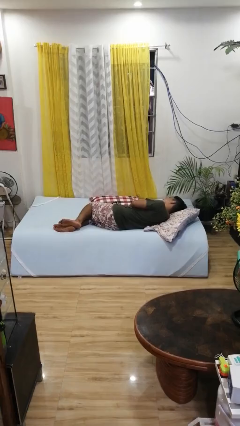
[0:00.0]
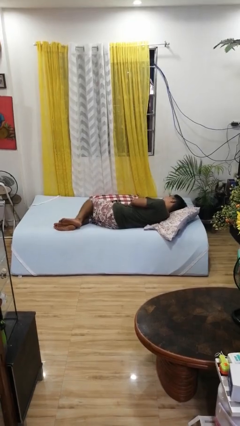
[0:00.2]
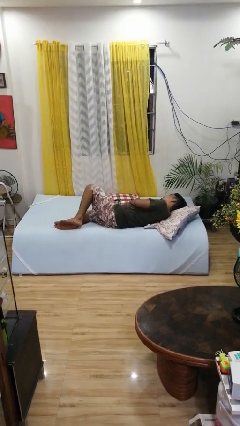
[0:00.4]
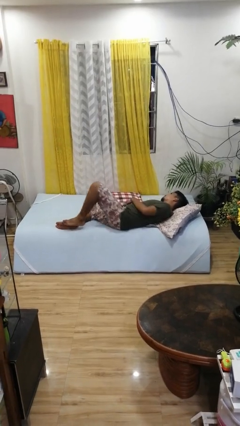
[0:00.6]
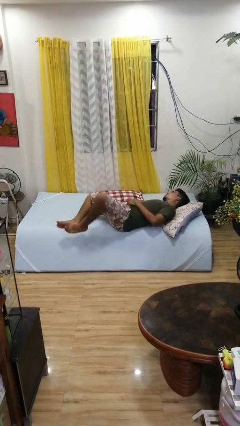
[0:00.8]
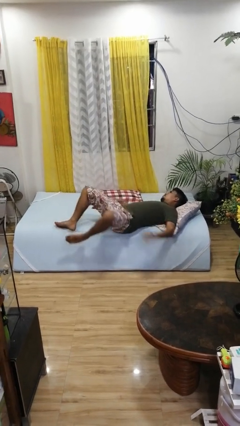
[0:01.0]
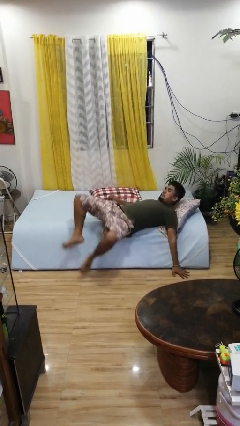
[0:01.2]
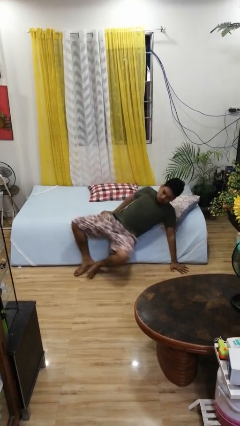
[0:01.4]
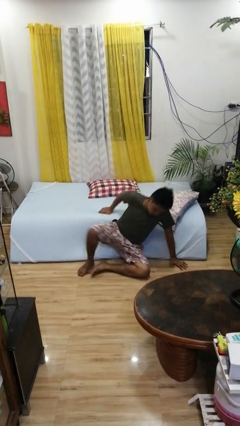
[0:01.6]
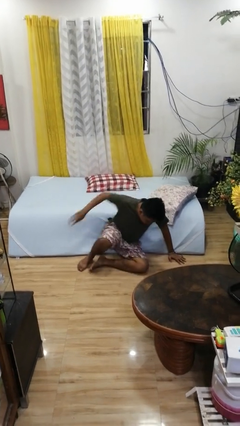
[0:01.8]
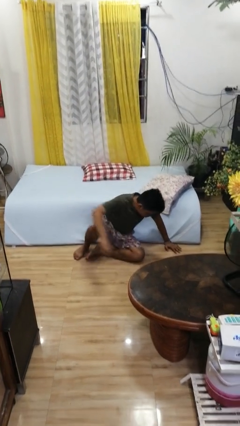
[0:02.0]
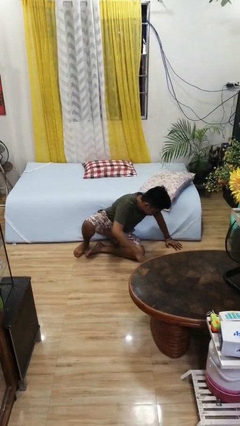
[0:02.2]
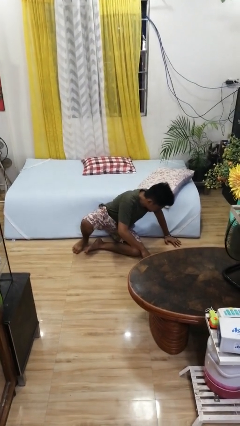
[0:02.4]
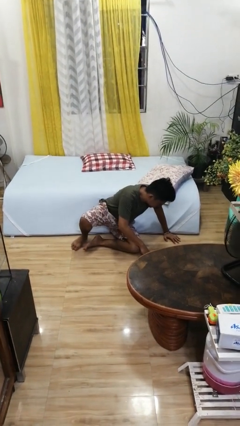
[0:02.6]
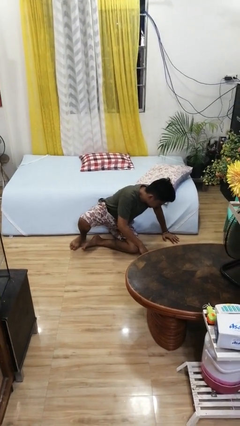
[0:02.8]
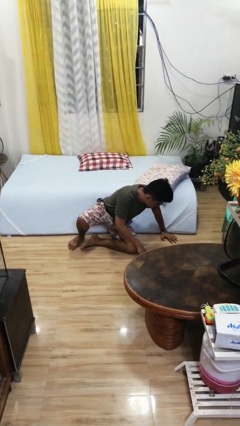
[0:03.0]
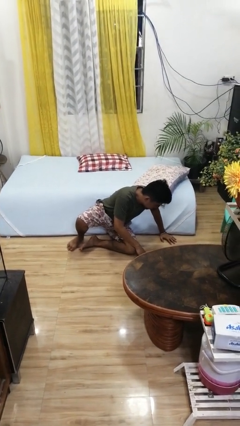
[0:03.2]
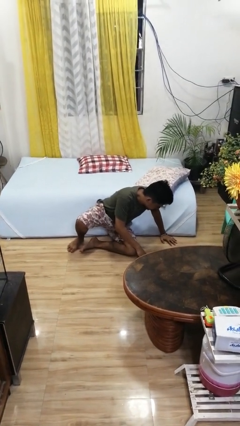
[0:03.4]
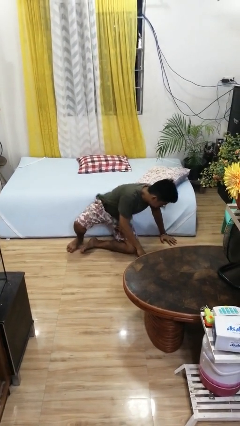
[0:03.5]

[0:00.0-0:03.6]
person falls from bed

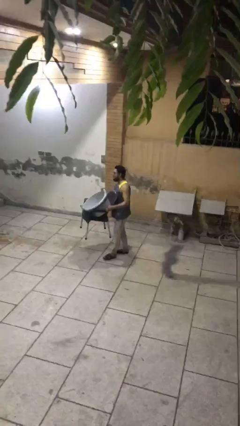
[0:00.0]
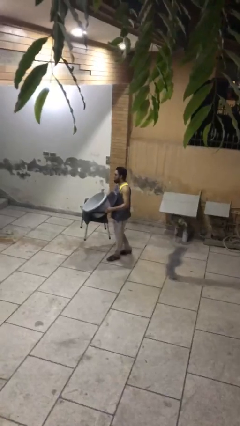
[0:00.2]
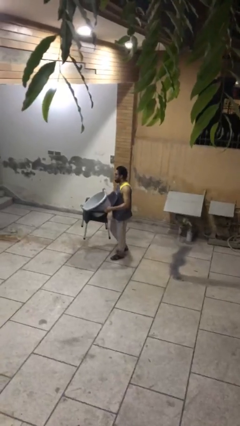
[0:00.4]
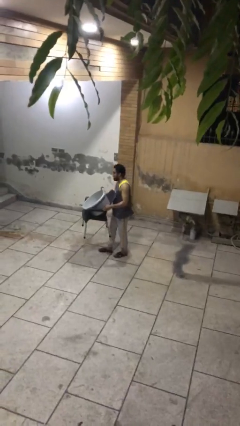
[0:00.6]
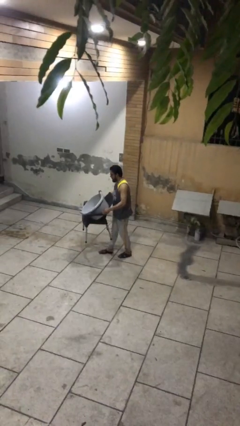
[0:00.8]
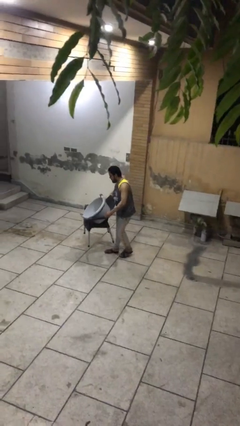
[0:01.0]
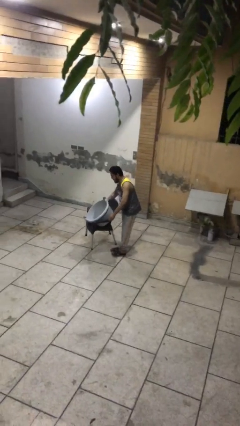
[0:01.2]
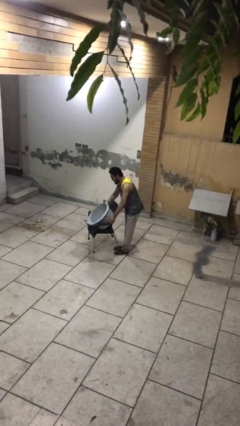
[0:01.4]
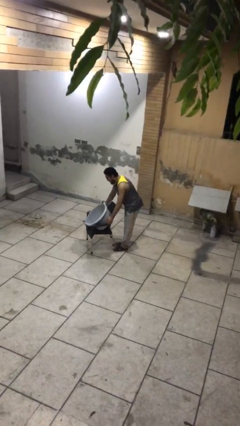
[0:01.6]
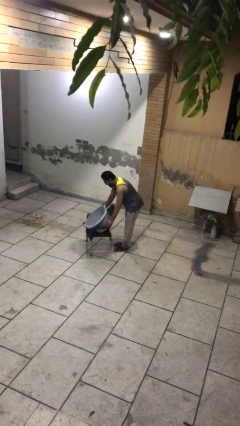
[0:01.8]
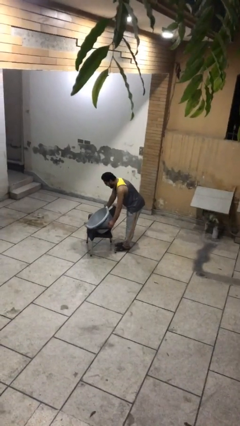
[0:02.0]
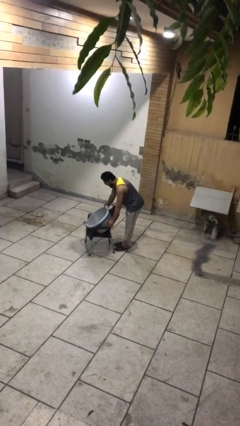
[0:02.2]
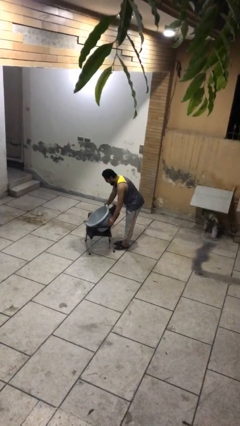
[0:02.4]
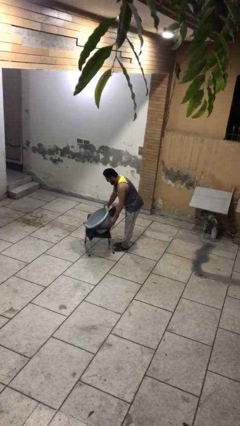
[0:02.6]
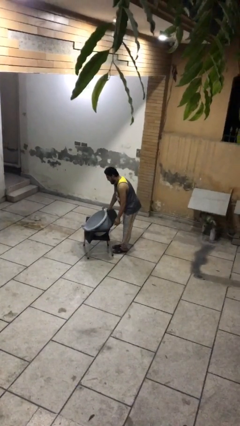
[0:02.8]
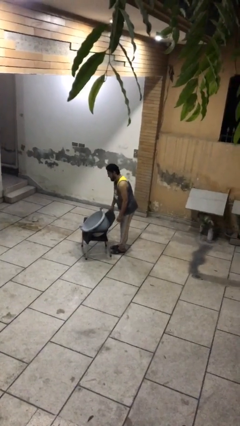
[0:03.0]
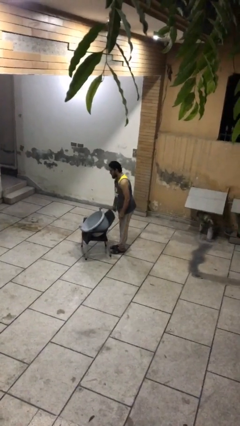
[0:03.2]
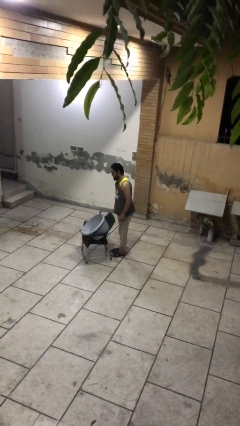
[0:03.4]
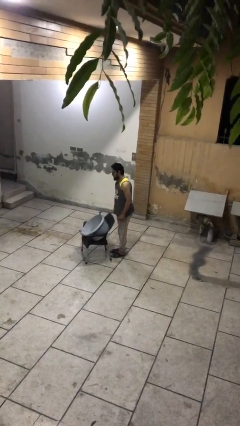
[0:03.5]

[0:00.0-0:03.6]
person puts down object on floor

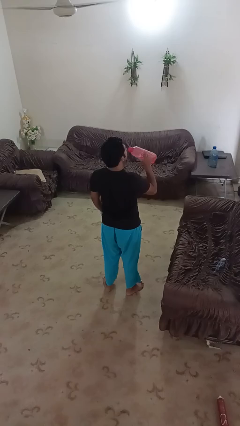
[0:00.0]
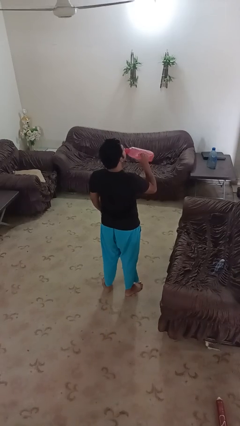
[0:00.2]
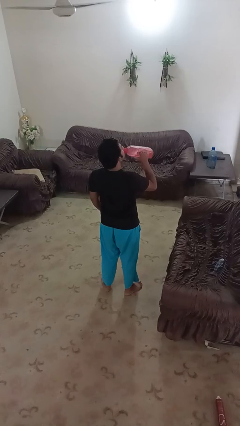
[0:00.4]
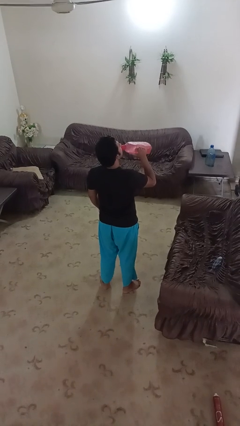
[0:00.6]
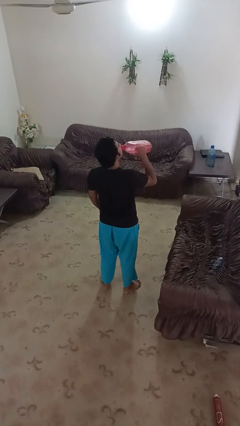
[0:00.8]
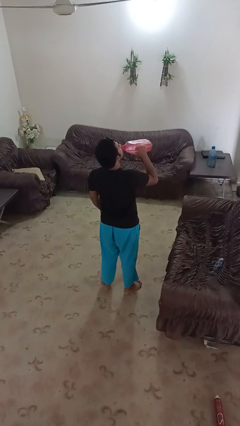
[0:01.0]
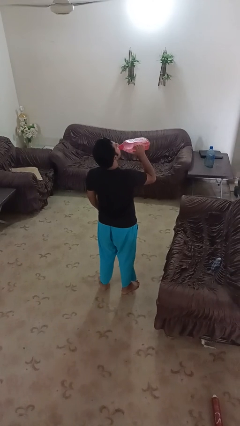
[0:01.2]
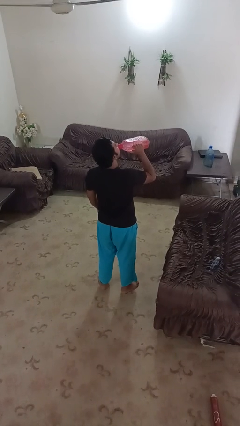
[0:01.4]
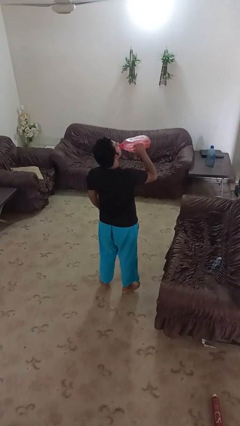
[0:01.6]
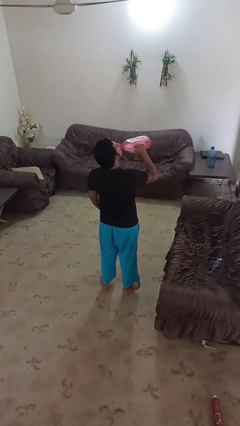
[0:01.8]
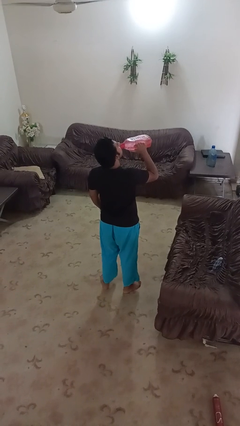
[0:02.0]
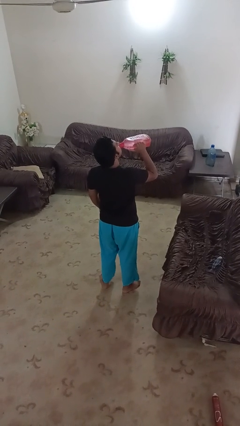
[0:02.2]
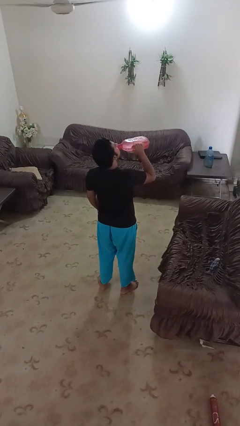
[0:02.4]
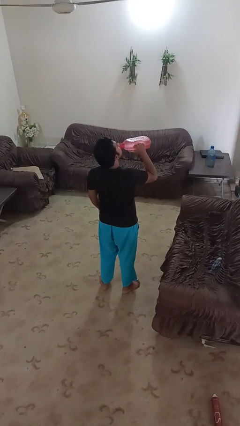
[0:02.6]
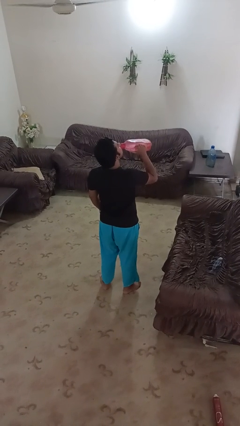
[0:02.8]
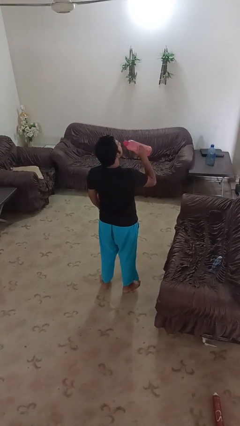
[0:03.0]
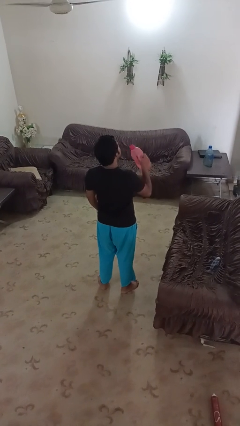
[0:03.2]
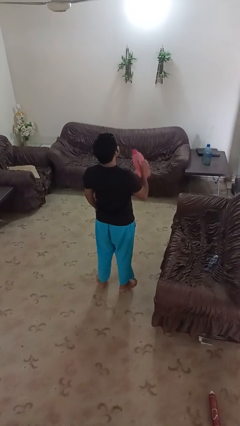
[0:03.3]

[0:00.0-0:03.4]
person drinks from bottle

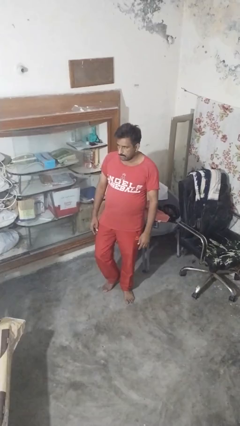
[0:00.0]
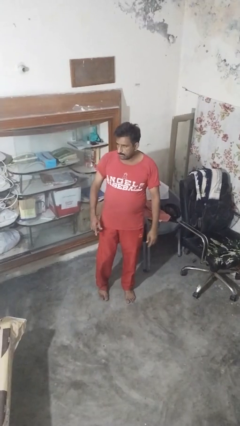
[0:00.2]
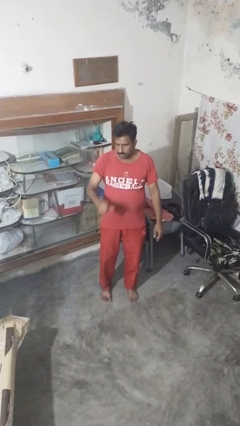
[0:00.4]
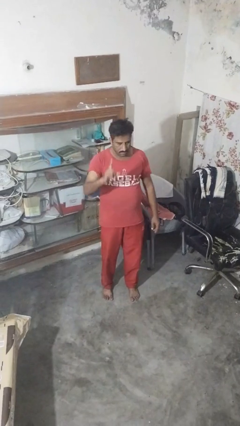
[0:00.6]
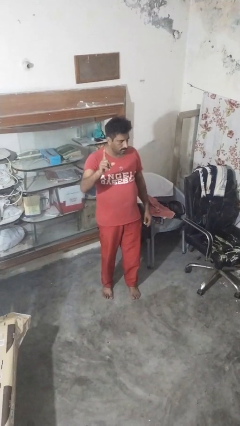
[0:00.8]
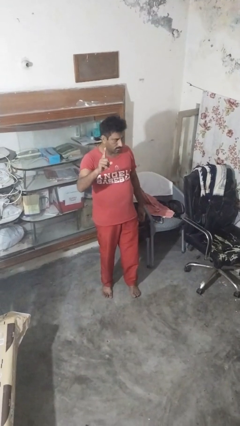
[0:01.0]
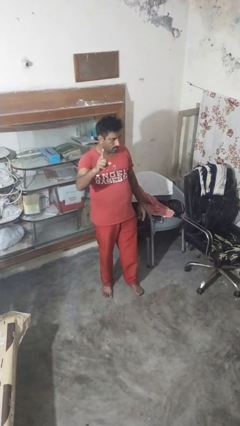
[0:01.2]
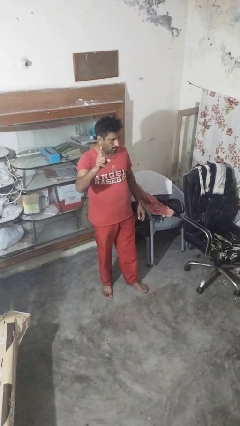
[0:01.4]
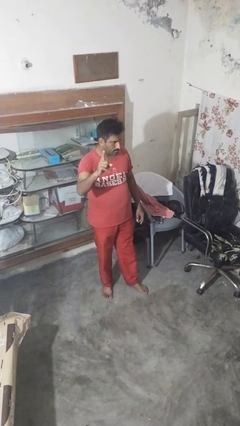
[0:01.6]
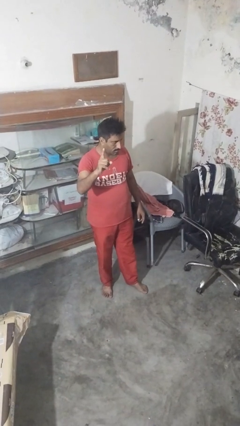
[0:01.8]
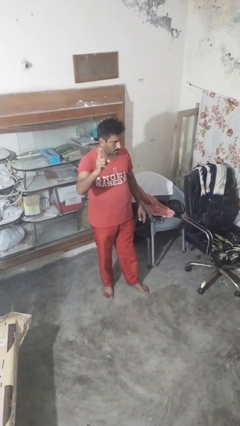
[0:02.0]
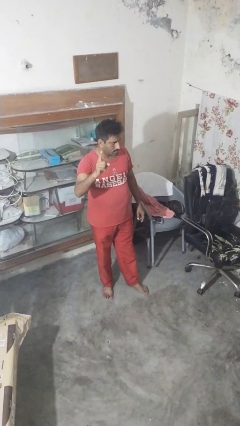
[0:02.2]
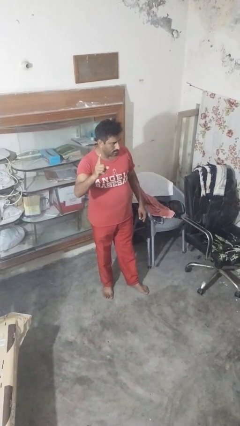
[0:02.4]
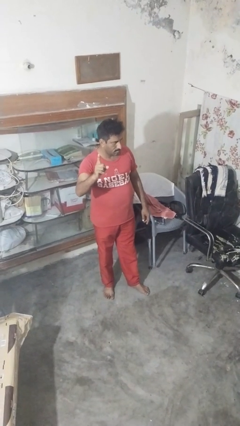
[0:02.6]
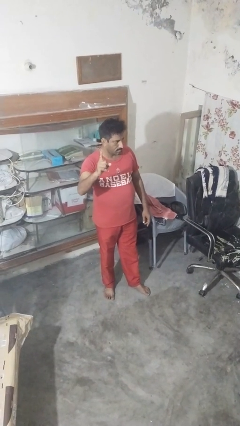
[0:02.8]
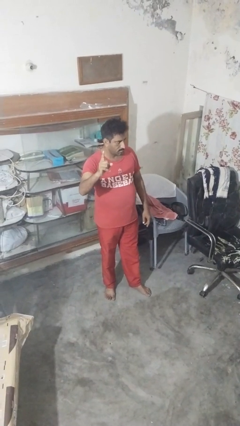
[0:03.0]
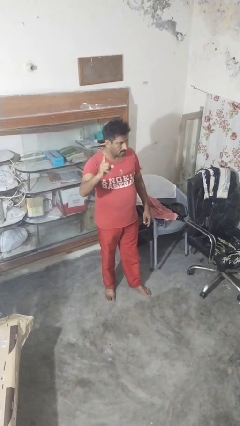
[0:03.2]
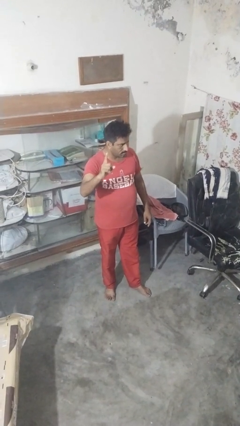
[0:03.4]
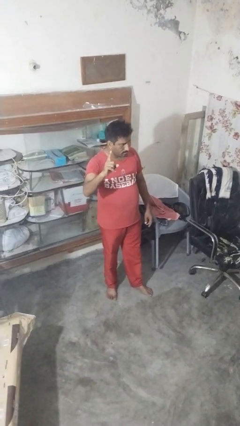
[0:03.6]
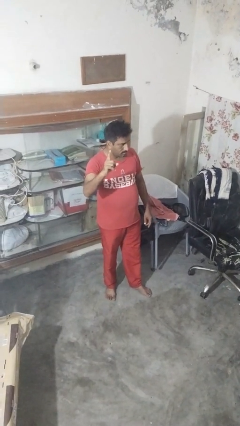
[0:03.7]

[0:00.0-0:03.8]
person gestures number one

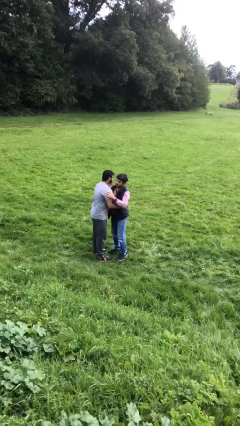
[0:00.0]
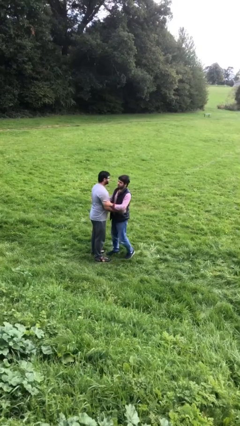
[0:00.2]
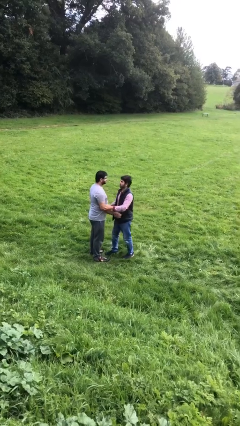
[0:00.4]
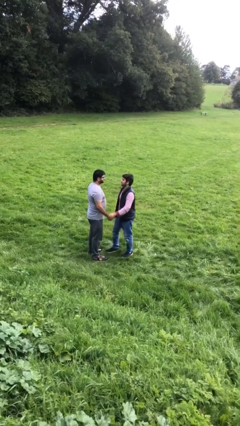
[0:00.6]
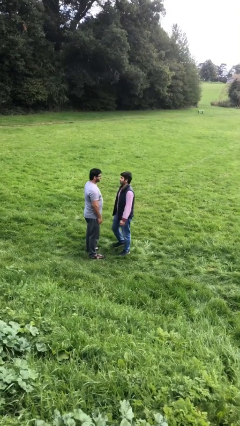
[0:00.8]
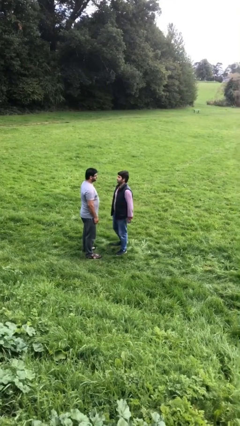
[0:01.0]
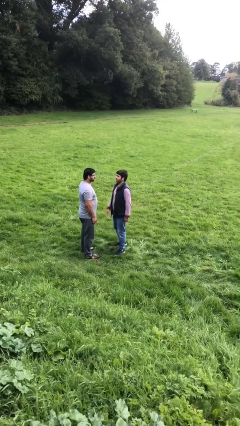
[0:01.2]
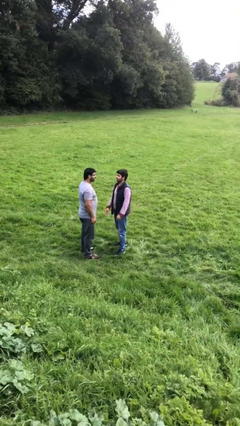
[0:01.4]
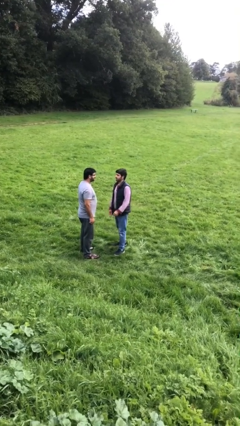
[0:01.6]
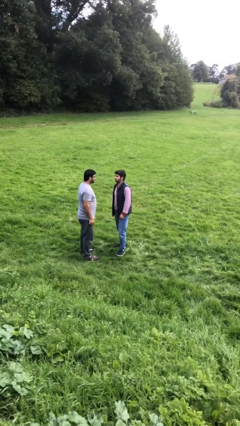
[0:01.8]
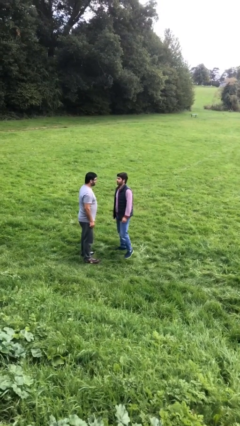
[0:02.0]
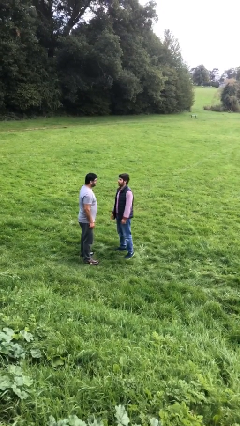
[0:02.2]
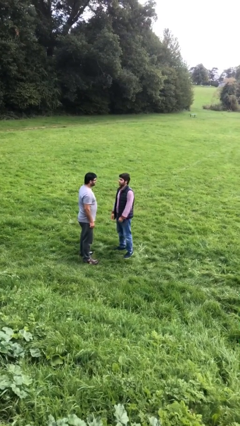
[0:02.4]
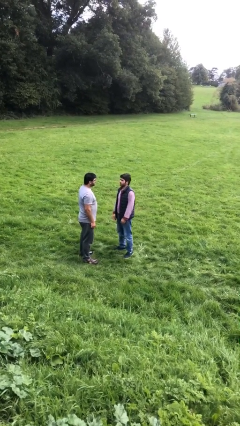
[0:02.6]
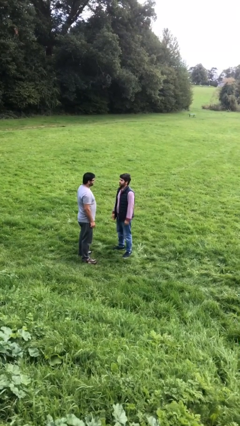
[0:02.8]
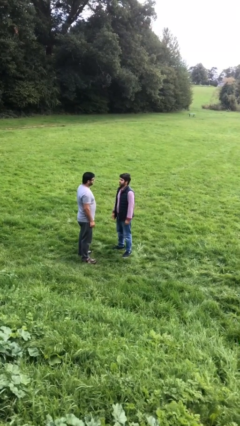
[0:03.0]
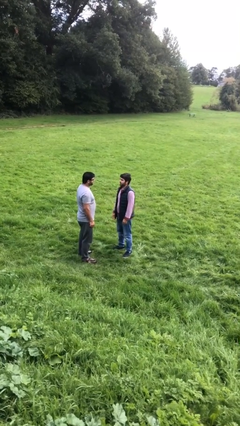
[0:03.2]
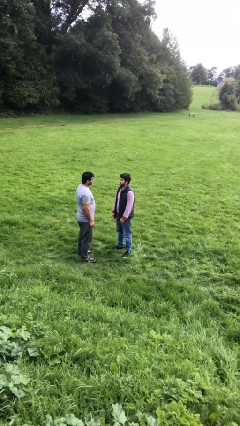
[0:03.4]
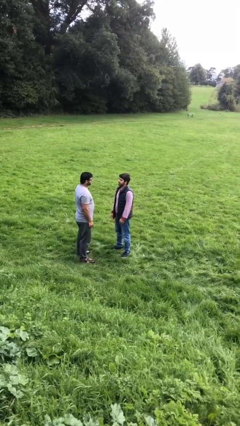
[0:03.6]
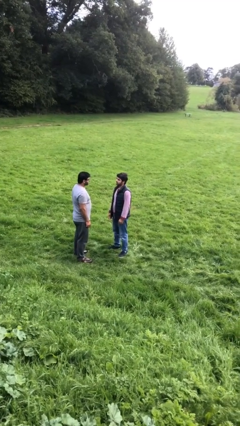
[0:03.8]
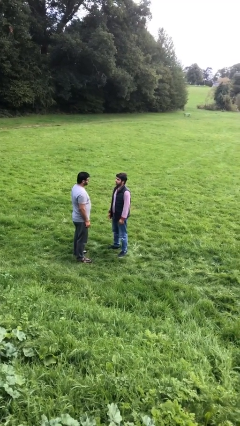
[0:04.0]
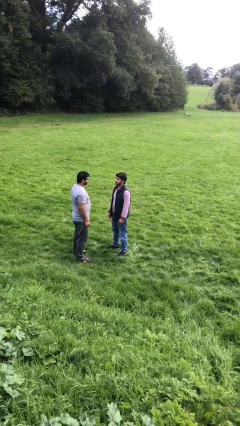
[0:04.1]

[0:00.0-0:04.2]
person talks to person
